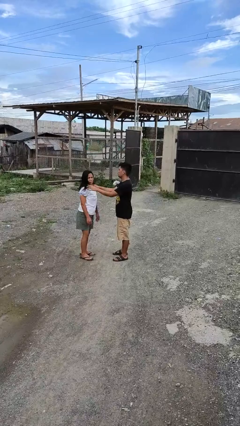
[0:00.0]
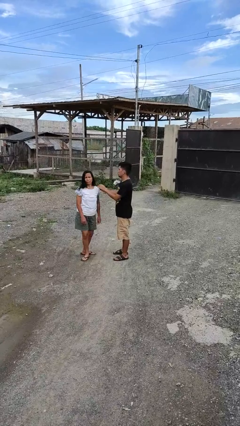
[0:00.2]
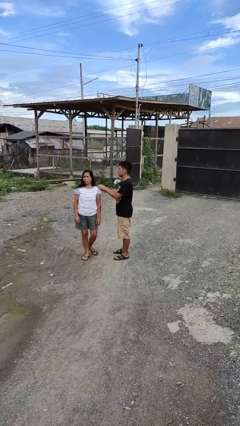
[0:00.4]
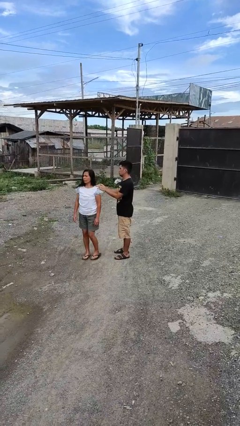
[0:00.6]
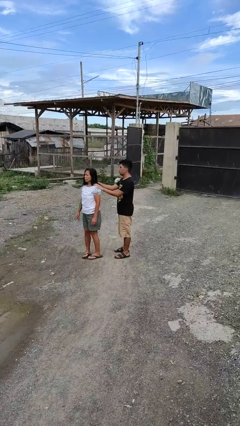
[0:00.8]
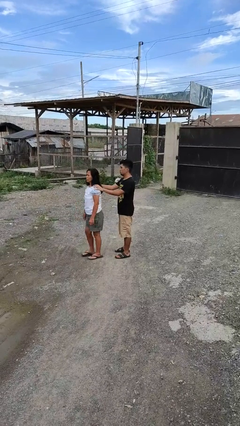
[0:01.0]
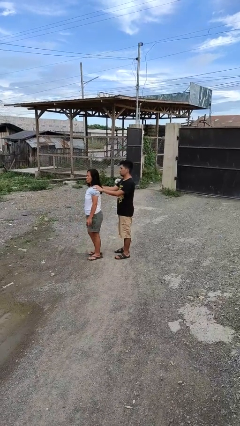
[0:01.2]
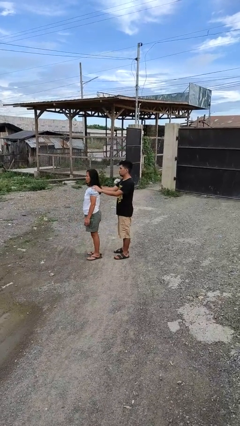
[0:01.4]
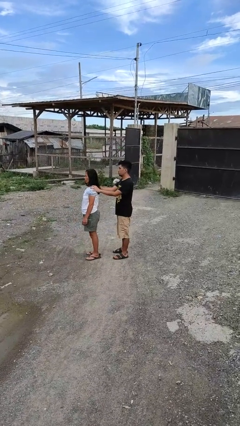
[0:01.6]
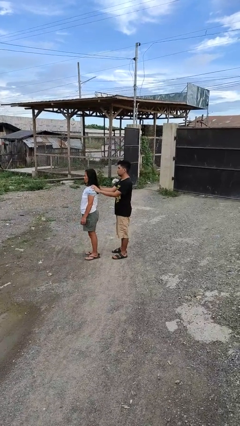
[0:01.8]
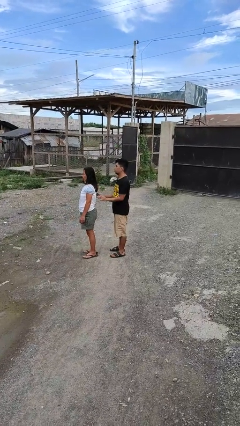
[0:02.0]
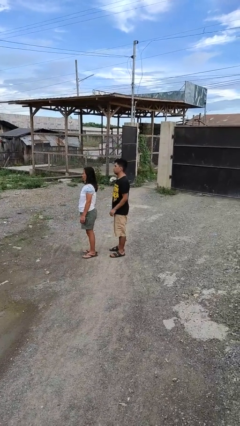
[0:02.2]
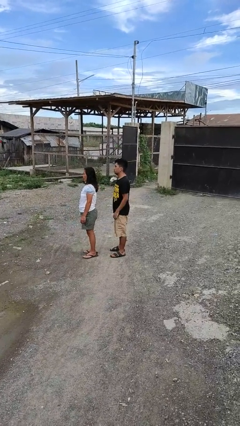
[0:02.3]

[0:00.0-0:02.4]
person spins person around

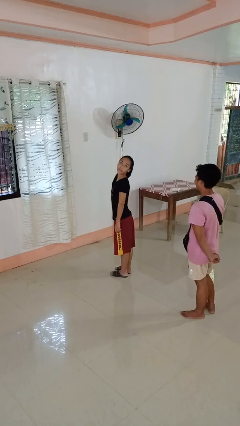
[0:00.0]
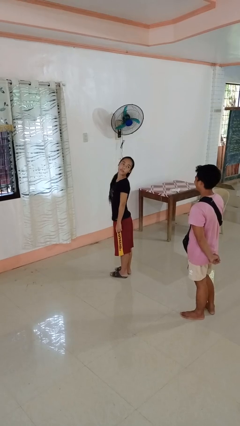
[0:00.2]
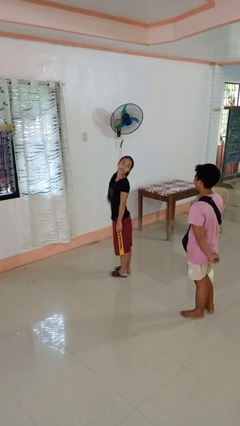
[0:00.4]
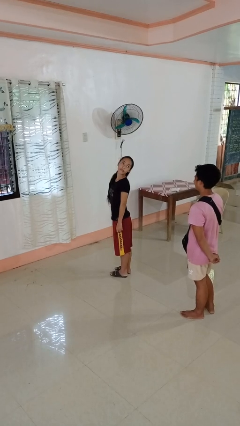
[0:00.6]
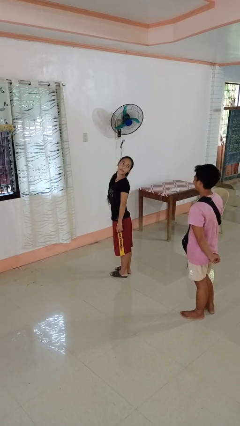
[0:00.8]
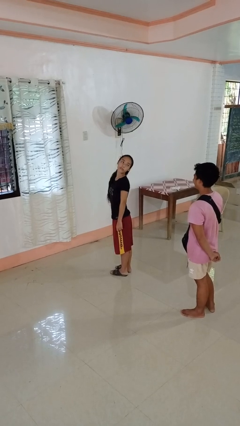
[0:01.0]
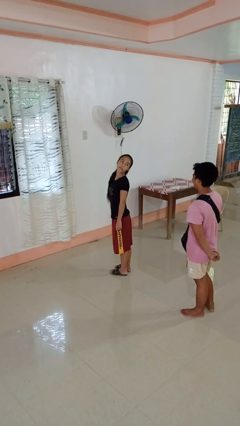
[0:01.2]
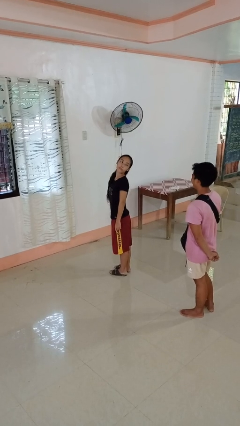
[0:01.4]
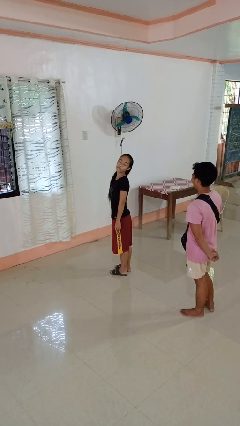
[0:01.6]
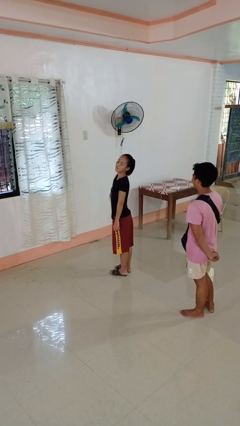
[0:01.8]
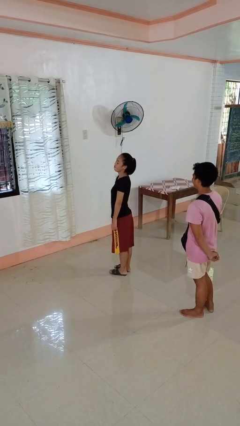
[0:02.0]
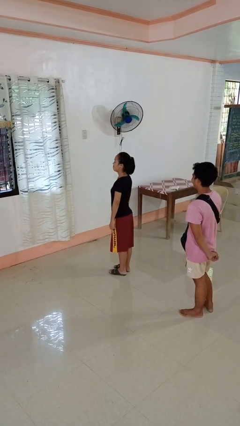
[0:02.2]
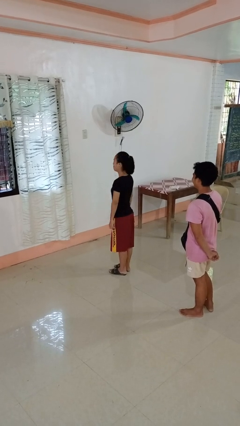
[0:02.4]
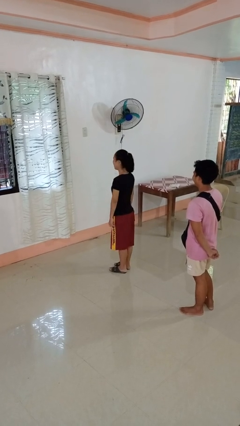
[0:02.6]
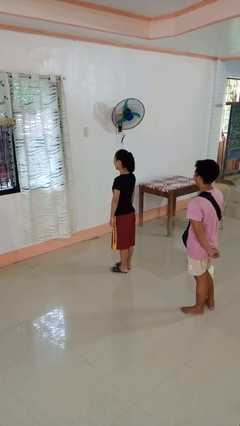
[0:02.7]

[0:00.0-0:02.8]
person looks over shoulder

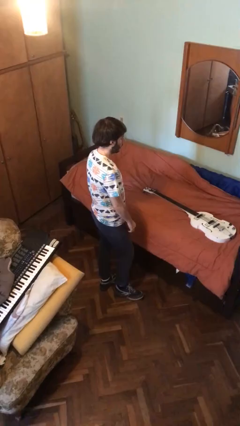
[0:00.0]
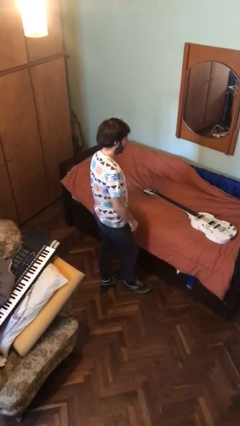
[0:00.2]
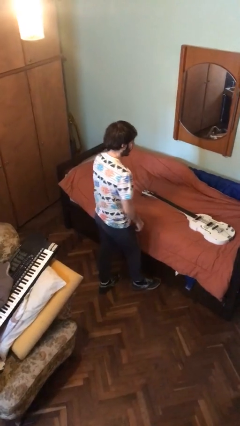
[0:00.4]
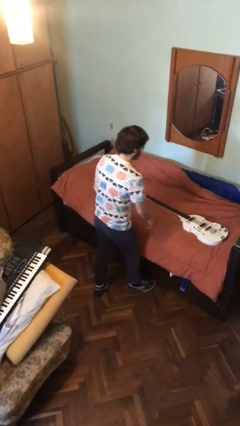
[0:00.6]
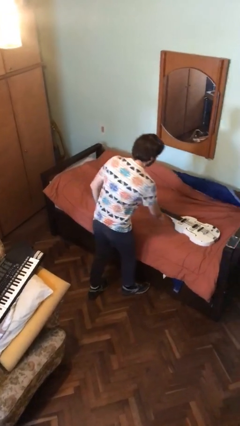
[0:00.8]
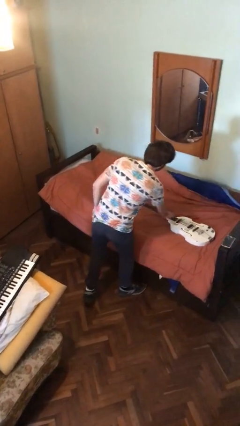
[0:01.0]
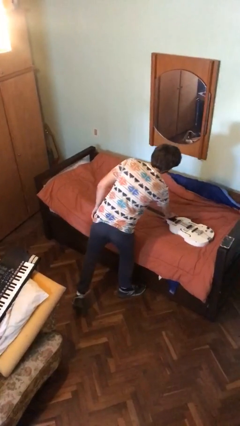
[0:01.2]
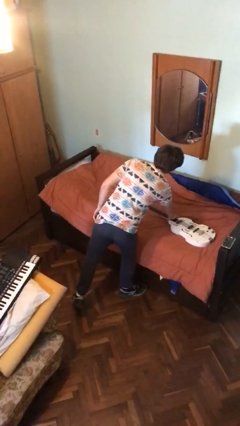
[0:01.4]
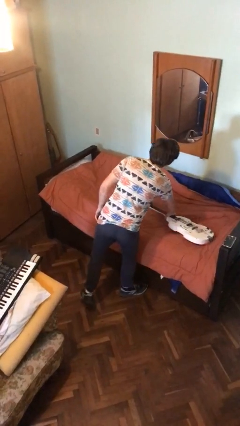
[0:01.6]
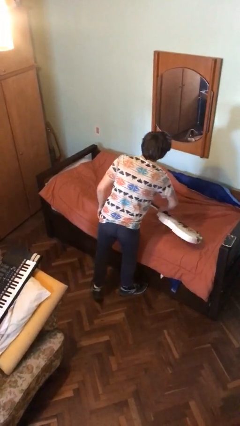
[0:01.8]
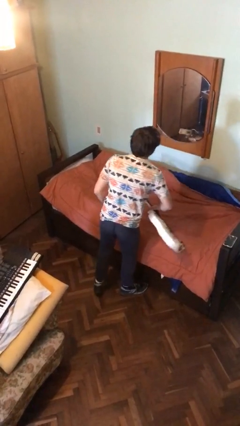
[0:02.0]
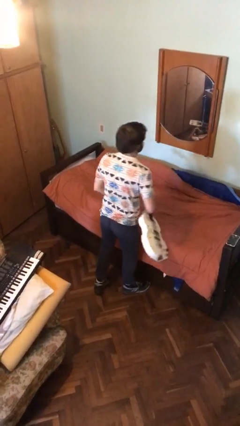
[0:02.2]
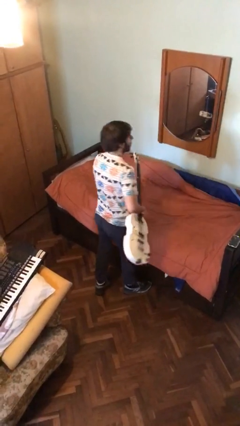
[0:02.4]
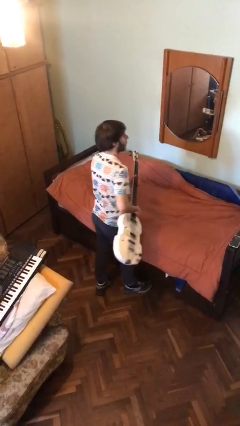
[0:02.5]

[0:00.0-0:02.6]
person picks up object from bed

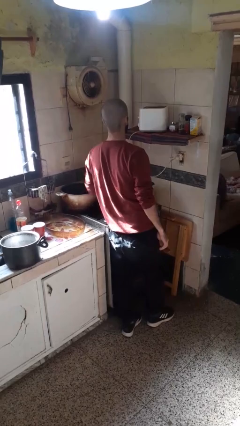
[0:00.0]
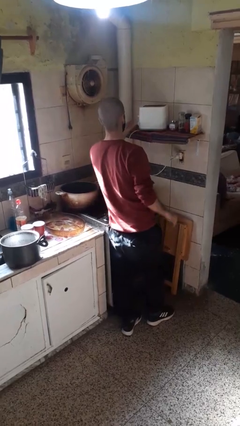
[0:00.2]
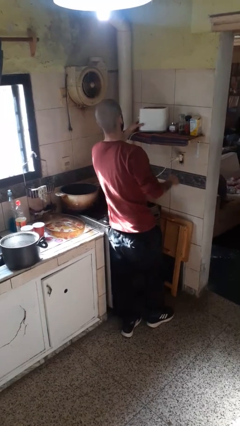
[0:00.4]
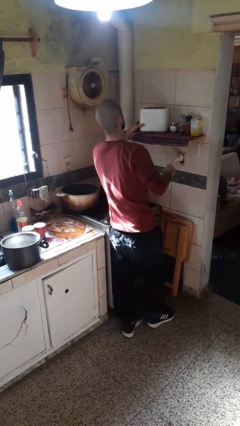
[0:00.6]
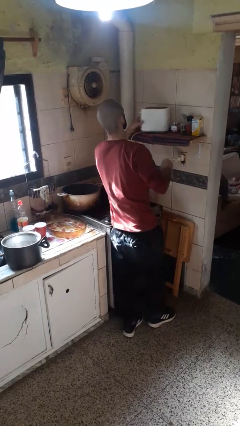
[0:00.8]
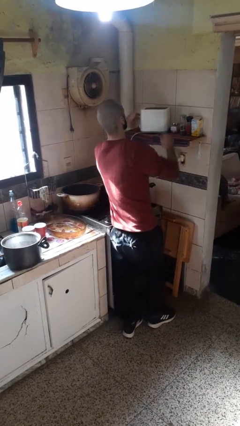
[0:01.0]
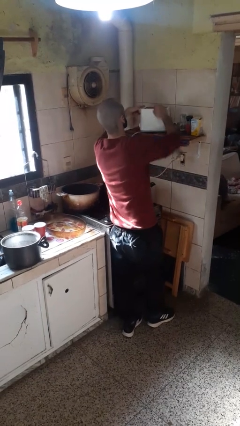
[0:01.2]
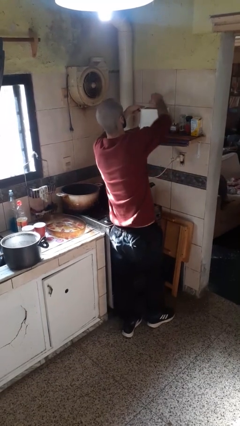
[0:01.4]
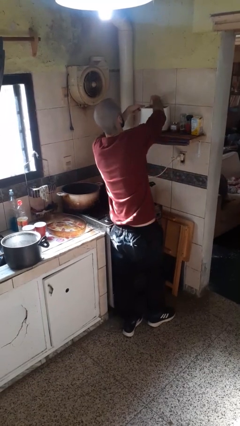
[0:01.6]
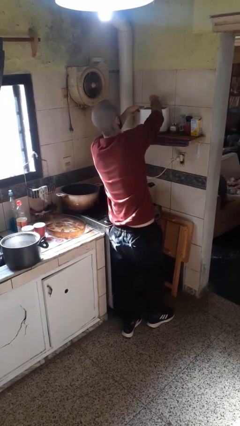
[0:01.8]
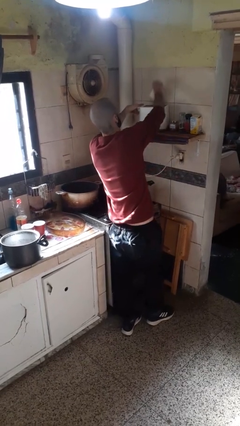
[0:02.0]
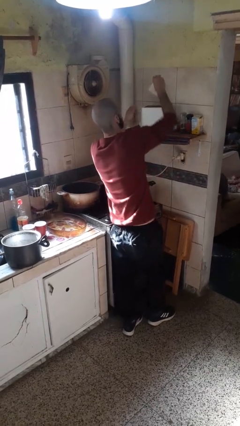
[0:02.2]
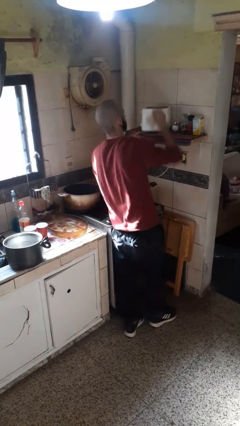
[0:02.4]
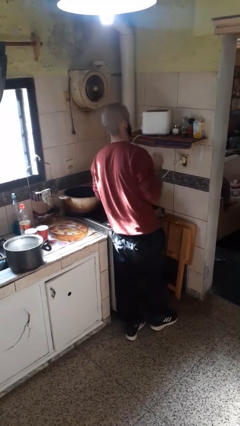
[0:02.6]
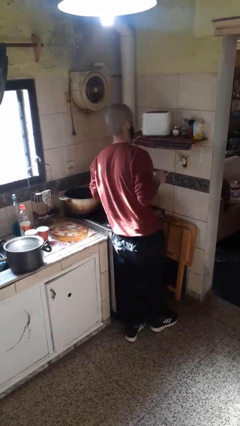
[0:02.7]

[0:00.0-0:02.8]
person takes object from toaster

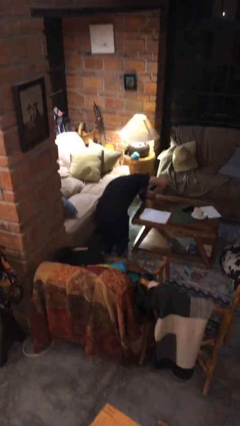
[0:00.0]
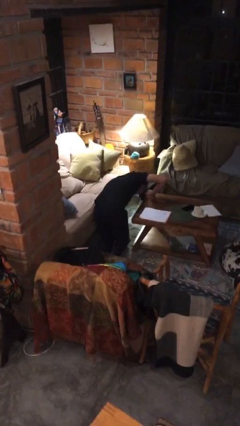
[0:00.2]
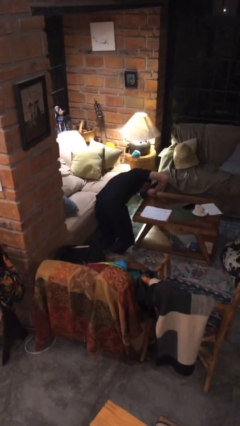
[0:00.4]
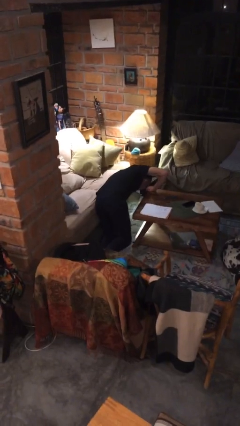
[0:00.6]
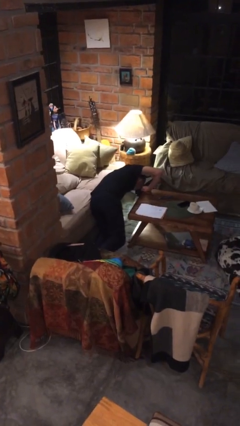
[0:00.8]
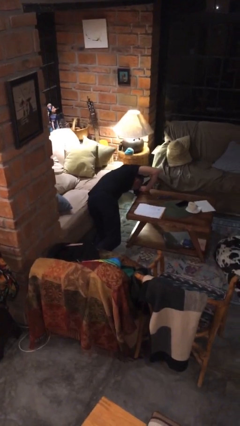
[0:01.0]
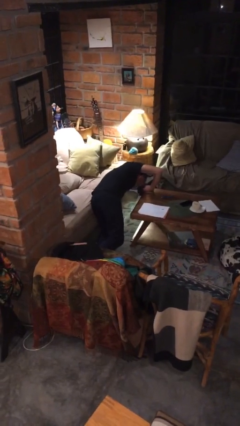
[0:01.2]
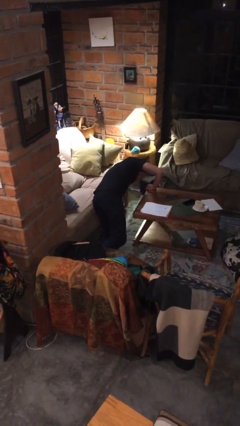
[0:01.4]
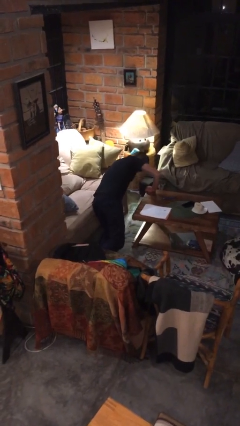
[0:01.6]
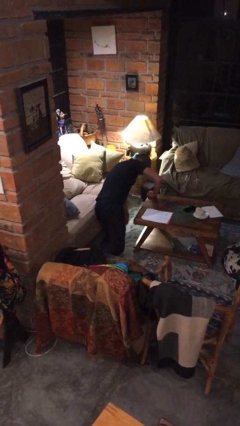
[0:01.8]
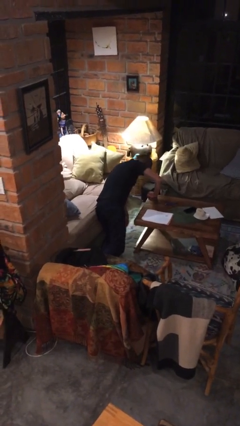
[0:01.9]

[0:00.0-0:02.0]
person searches under couch

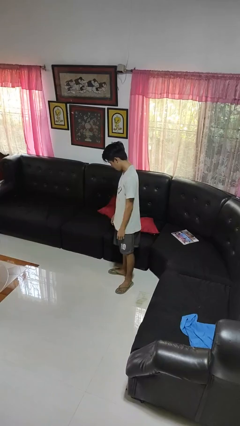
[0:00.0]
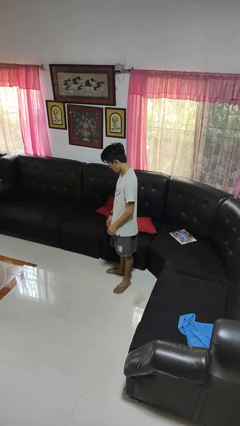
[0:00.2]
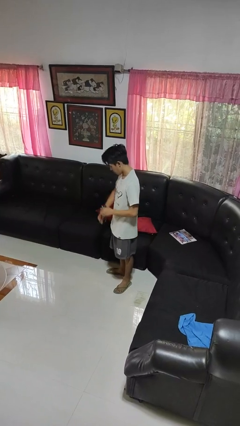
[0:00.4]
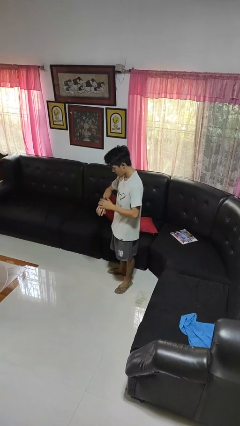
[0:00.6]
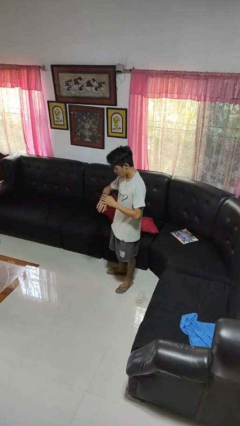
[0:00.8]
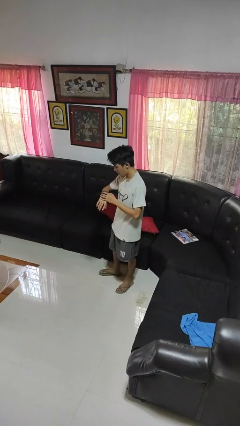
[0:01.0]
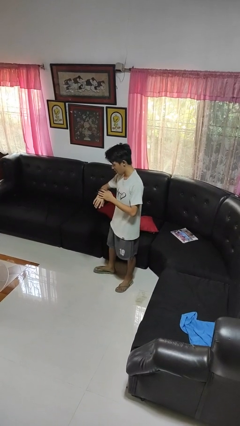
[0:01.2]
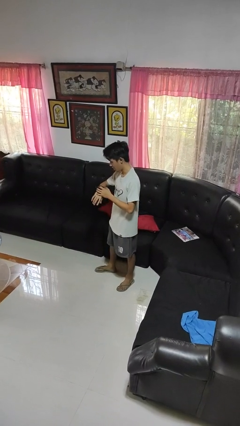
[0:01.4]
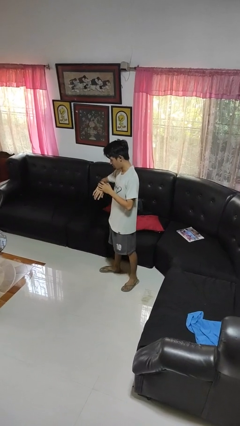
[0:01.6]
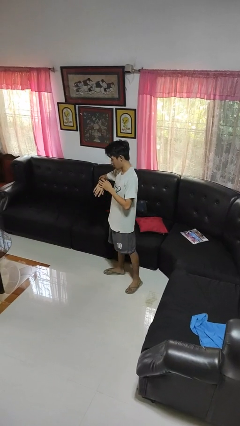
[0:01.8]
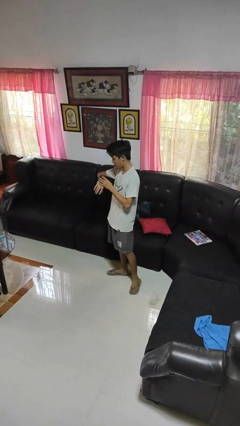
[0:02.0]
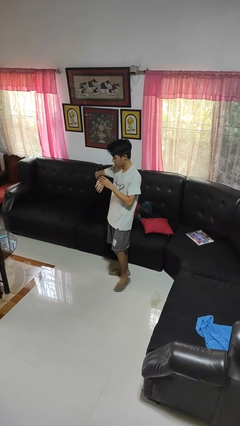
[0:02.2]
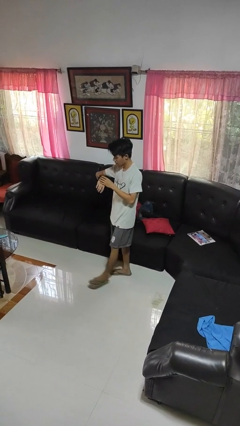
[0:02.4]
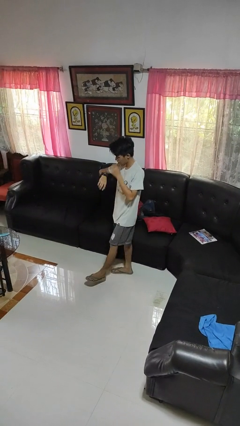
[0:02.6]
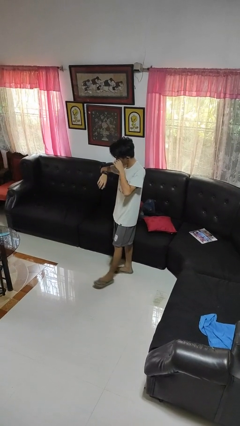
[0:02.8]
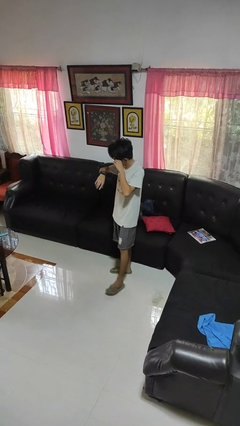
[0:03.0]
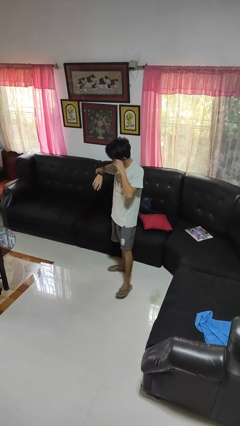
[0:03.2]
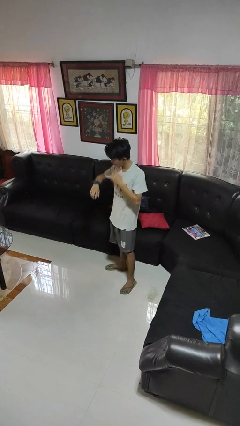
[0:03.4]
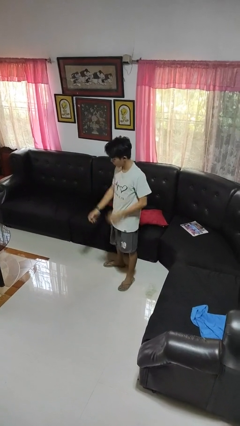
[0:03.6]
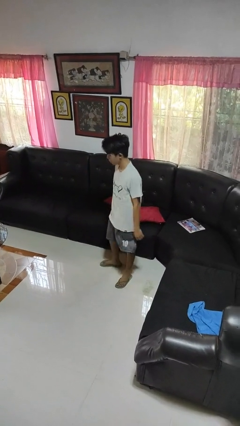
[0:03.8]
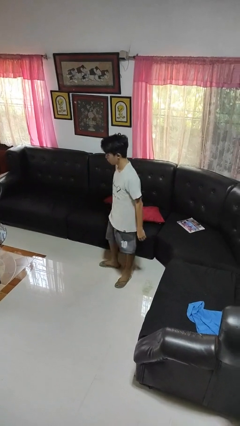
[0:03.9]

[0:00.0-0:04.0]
person looks at wristwatch

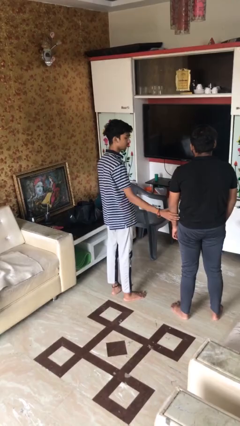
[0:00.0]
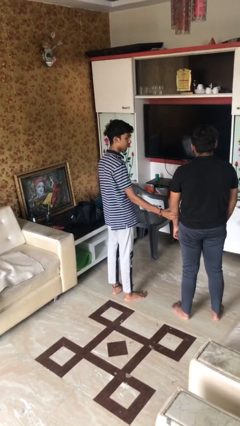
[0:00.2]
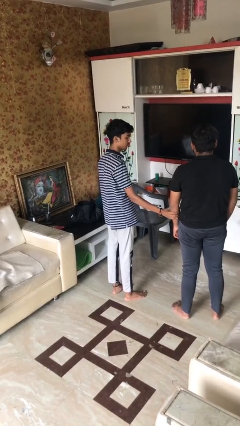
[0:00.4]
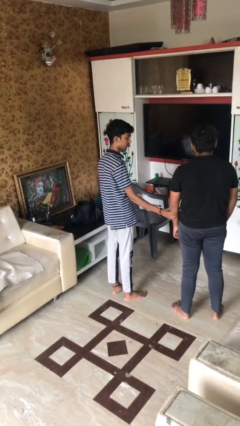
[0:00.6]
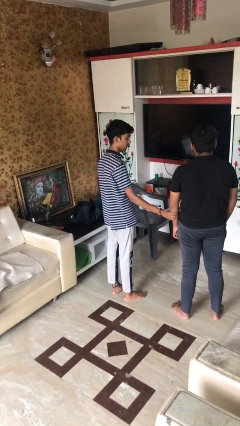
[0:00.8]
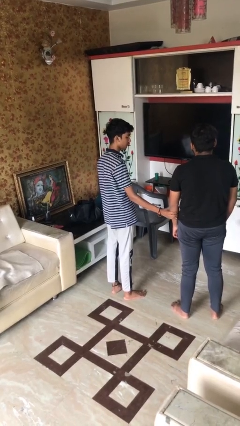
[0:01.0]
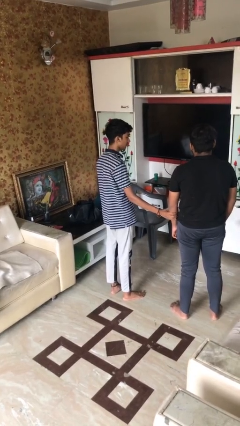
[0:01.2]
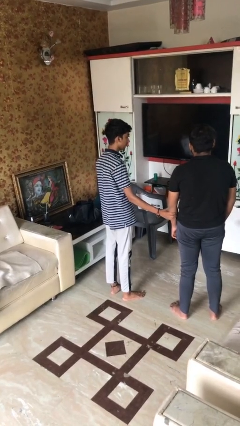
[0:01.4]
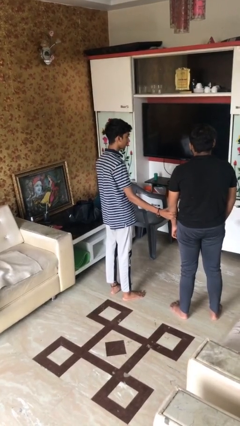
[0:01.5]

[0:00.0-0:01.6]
person grabs person by forearm
